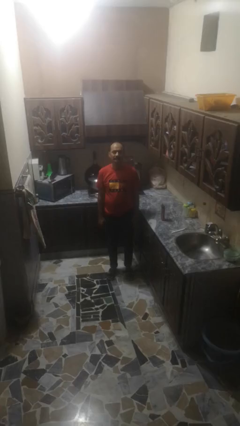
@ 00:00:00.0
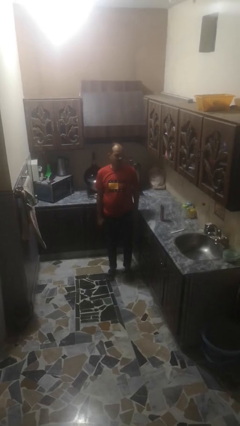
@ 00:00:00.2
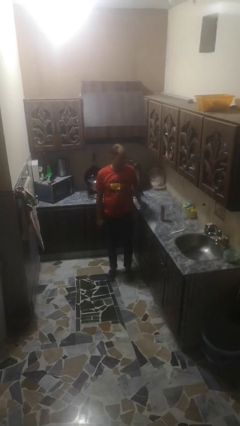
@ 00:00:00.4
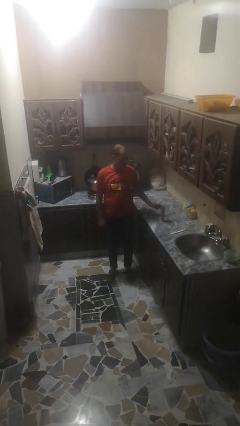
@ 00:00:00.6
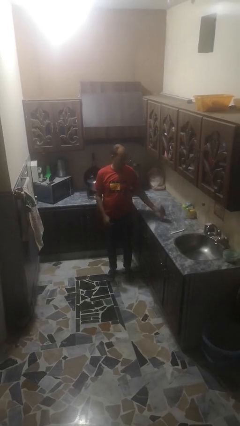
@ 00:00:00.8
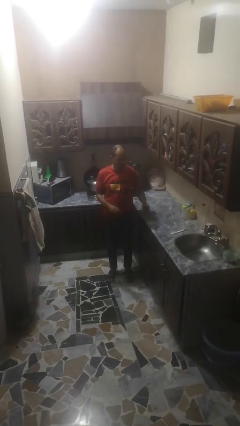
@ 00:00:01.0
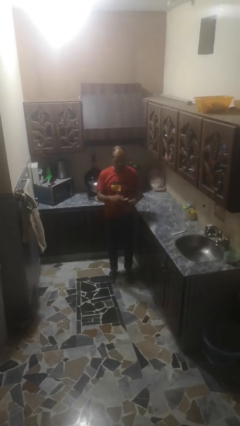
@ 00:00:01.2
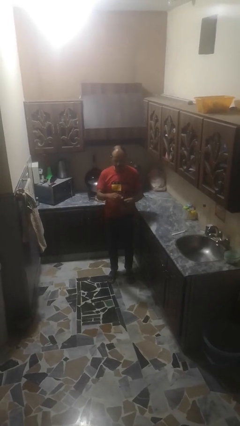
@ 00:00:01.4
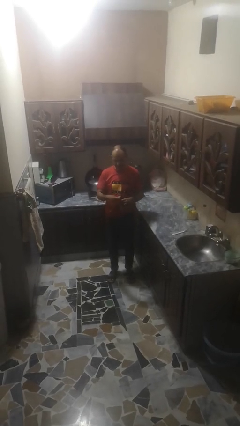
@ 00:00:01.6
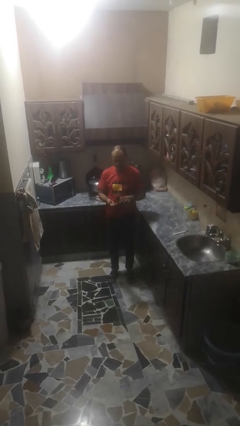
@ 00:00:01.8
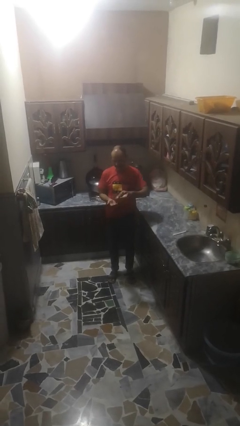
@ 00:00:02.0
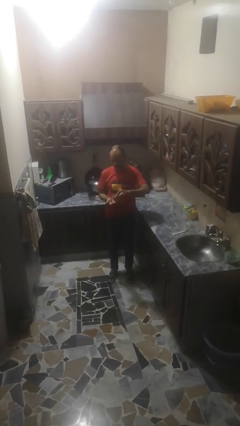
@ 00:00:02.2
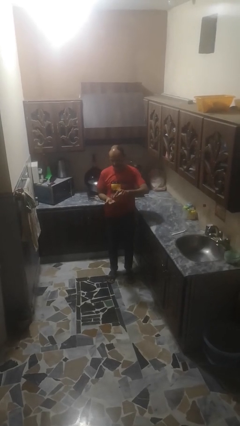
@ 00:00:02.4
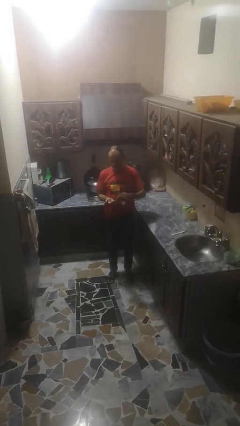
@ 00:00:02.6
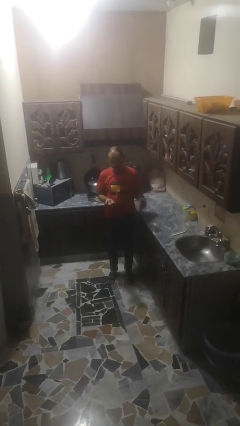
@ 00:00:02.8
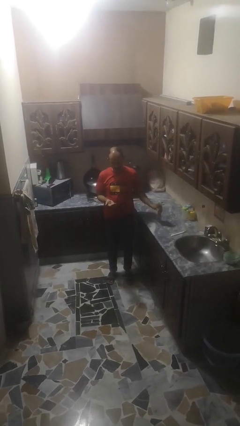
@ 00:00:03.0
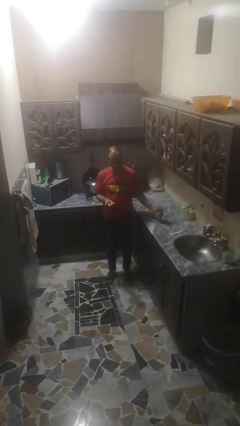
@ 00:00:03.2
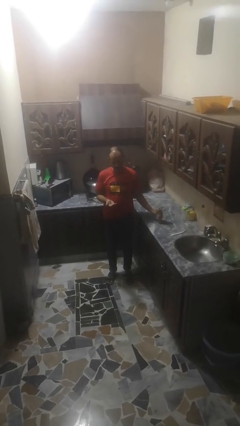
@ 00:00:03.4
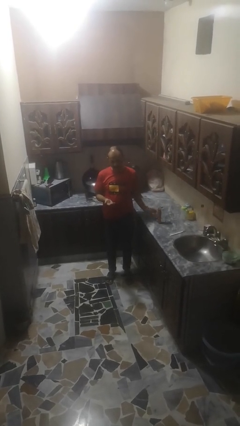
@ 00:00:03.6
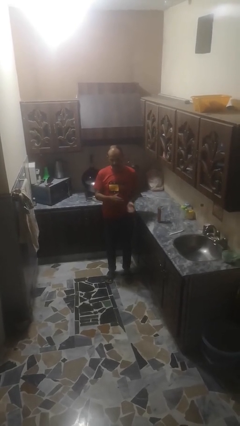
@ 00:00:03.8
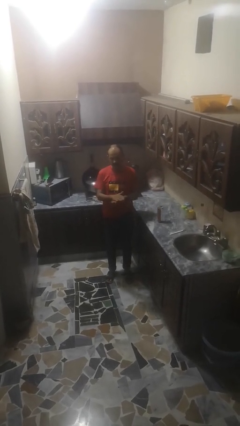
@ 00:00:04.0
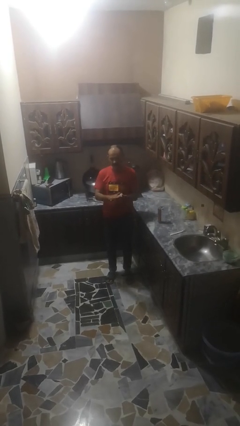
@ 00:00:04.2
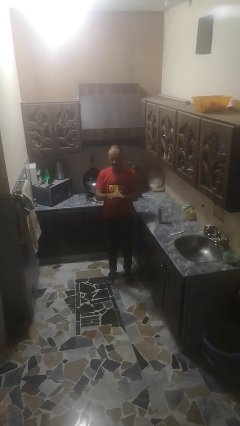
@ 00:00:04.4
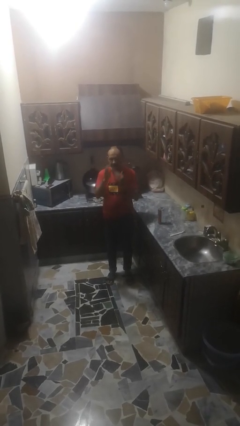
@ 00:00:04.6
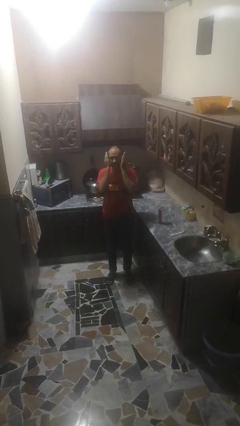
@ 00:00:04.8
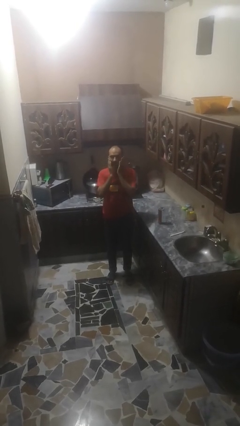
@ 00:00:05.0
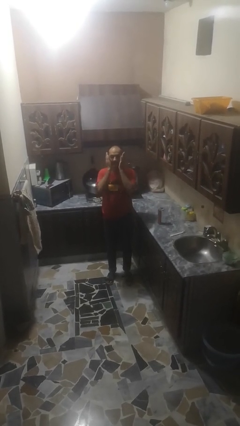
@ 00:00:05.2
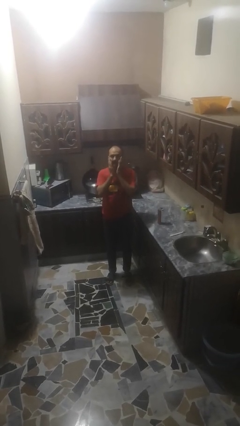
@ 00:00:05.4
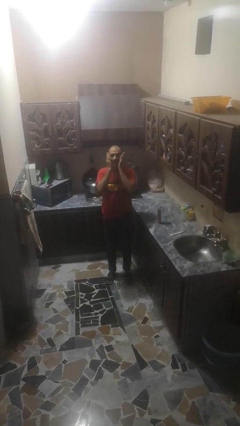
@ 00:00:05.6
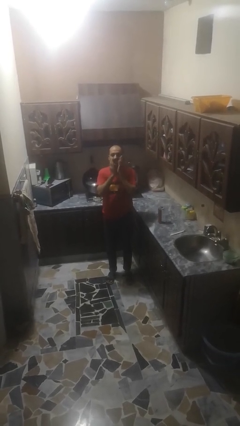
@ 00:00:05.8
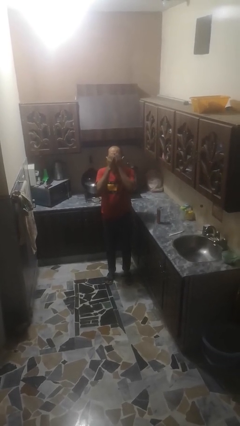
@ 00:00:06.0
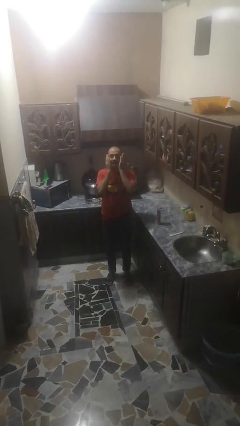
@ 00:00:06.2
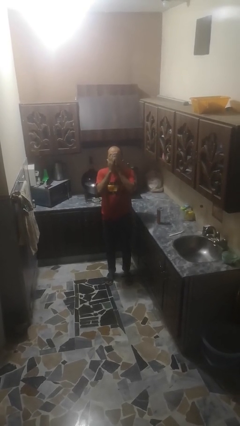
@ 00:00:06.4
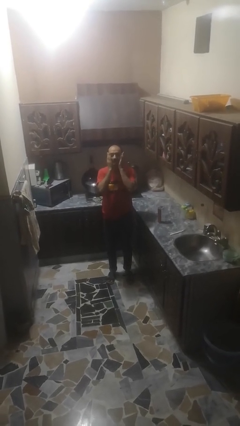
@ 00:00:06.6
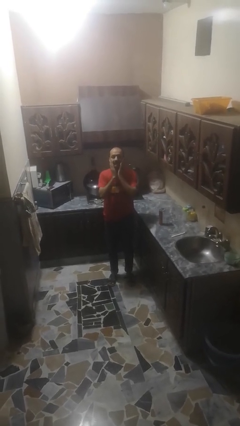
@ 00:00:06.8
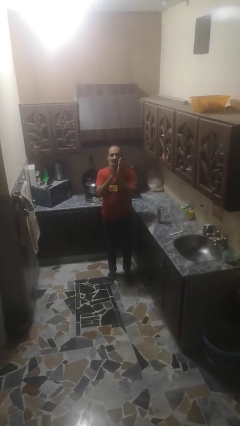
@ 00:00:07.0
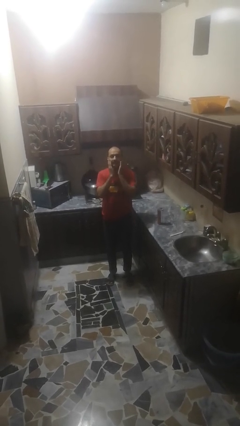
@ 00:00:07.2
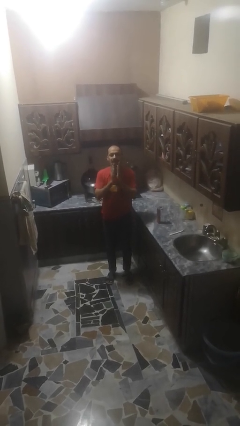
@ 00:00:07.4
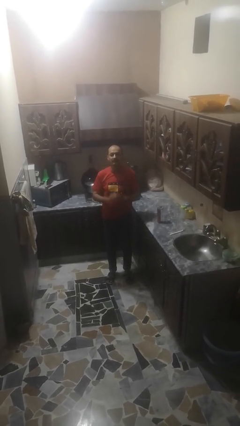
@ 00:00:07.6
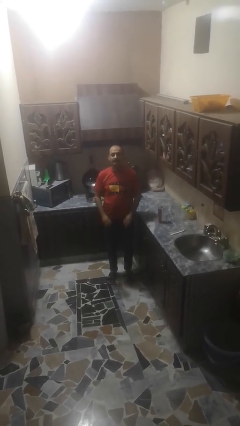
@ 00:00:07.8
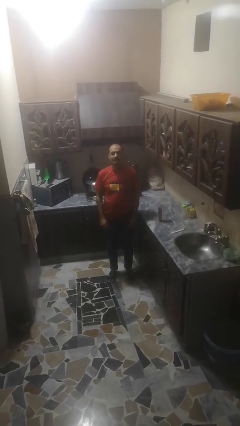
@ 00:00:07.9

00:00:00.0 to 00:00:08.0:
person applies sunscreen

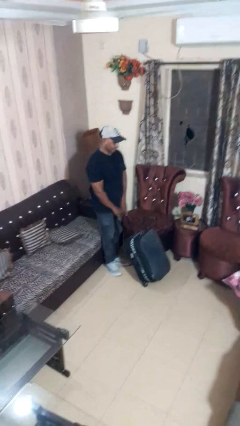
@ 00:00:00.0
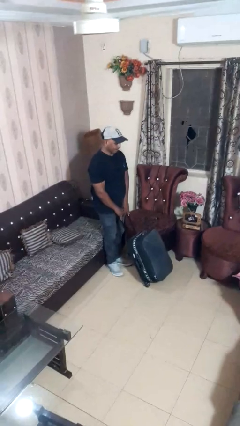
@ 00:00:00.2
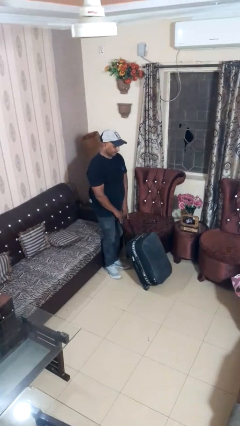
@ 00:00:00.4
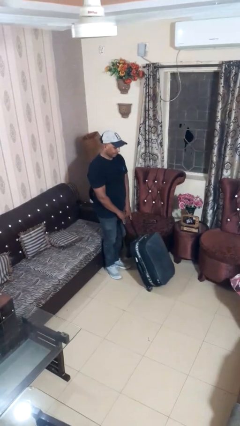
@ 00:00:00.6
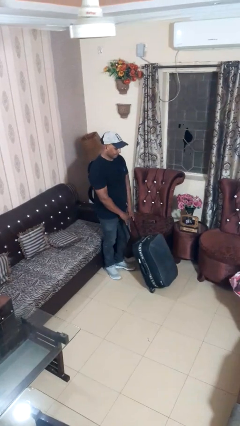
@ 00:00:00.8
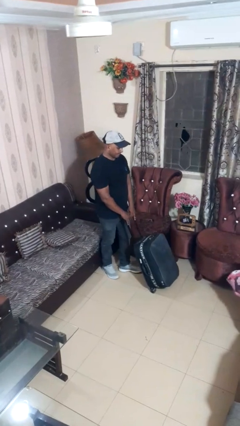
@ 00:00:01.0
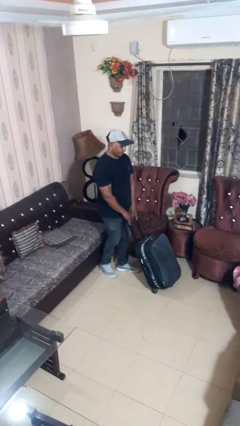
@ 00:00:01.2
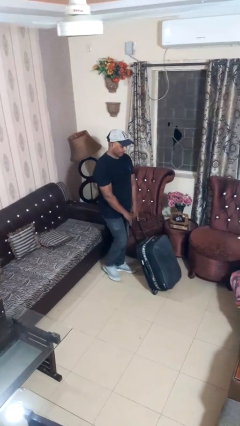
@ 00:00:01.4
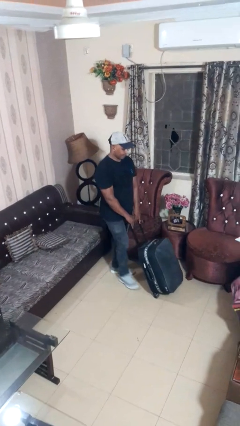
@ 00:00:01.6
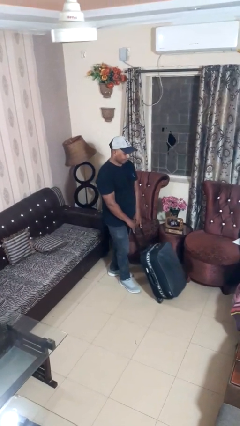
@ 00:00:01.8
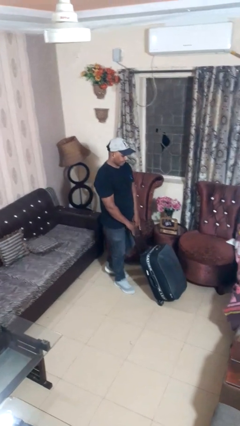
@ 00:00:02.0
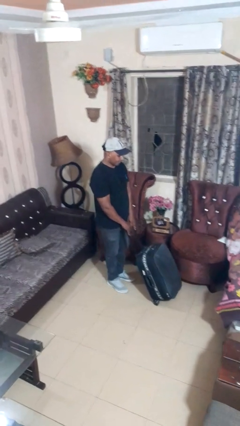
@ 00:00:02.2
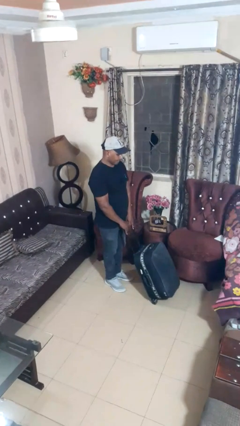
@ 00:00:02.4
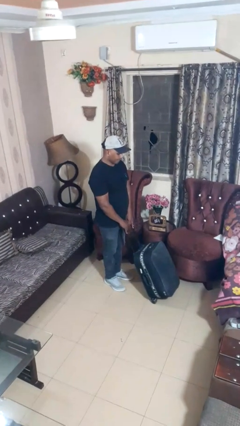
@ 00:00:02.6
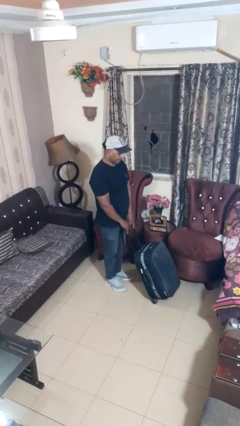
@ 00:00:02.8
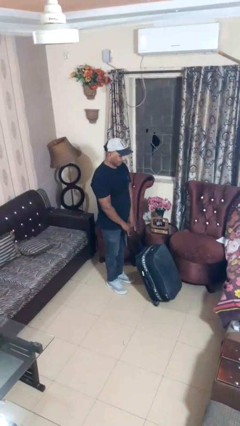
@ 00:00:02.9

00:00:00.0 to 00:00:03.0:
person pushes wheeled cart

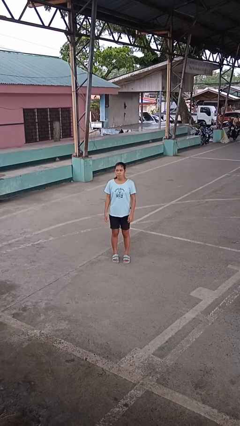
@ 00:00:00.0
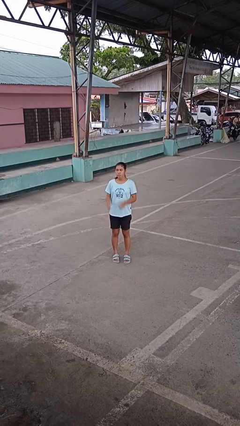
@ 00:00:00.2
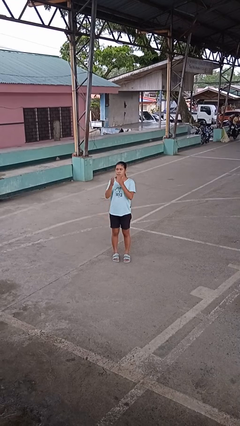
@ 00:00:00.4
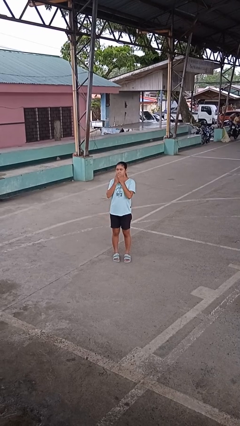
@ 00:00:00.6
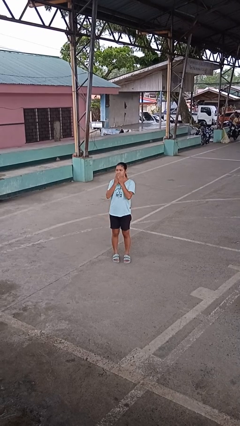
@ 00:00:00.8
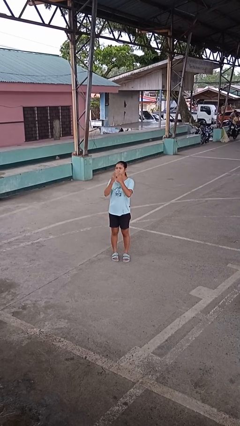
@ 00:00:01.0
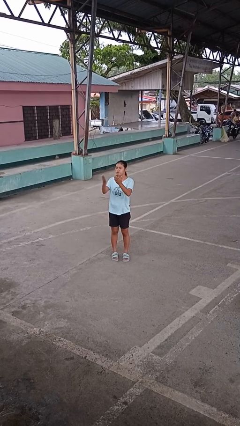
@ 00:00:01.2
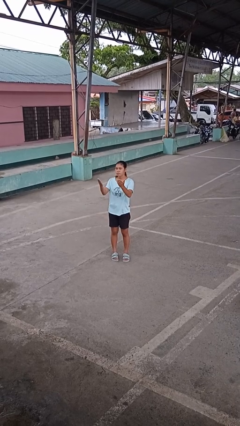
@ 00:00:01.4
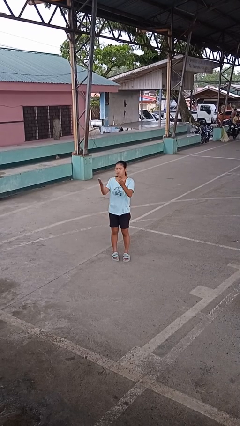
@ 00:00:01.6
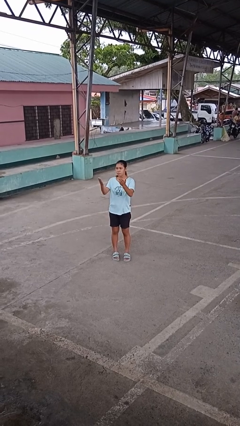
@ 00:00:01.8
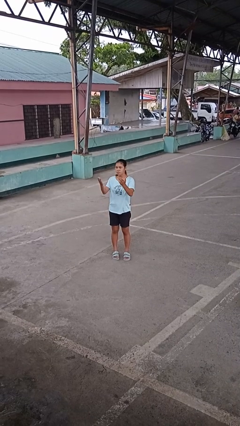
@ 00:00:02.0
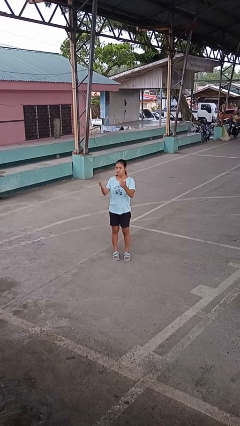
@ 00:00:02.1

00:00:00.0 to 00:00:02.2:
person gestures blow kiss

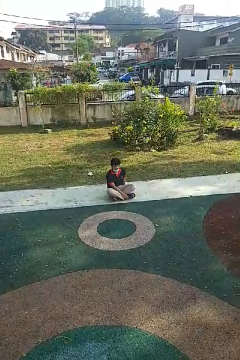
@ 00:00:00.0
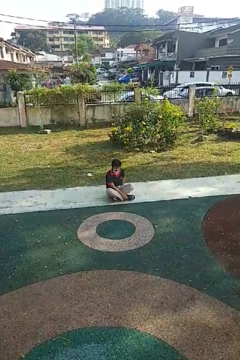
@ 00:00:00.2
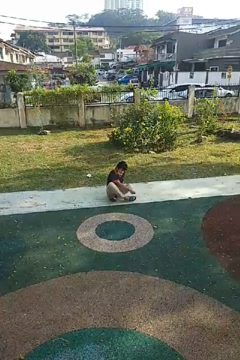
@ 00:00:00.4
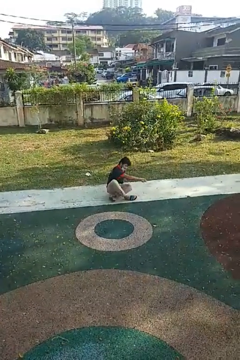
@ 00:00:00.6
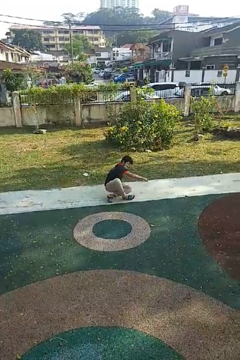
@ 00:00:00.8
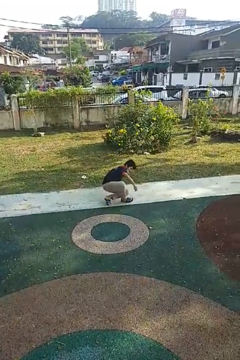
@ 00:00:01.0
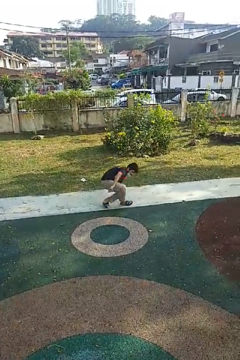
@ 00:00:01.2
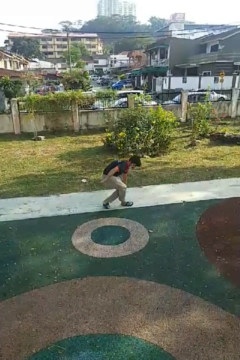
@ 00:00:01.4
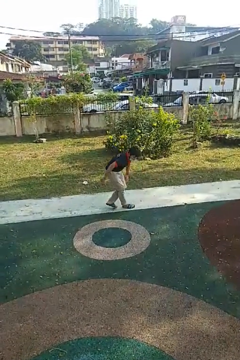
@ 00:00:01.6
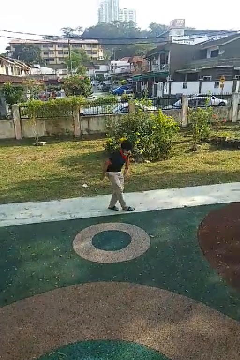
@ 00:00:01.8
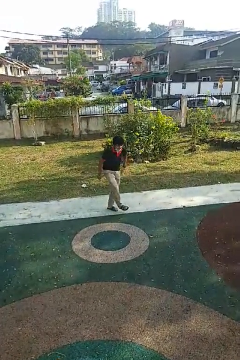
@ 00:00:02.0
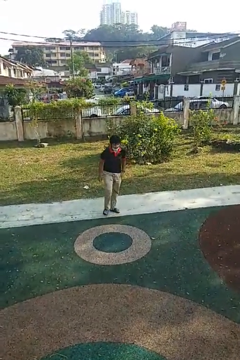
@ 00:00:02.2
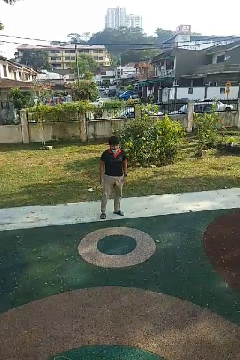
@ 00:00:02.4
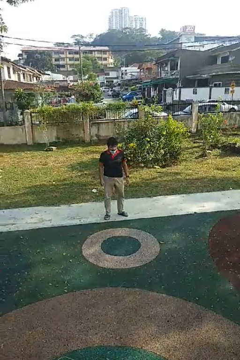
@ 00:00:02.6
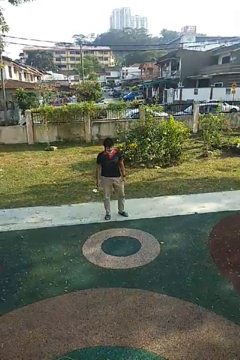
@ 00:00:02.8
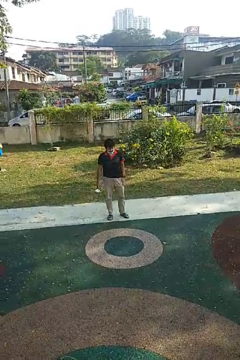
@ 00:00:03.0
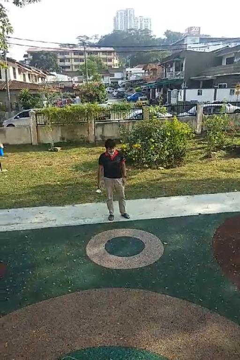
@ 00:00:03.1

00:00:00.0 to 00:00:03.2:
person stands up from floor

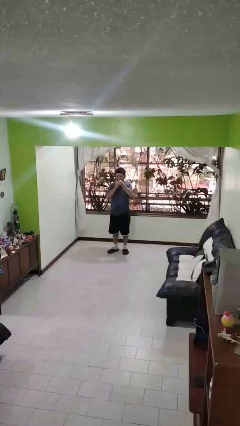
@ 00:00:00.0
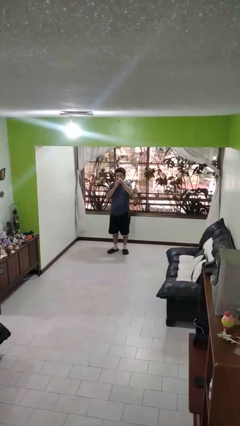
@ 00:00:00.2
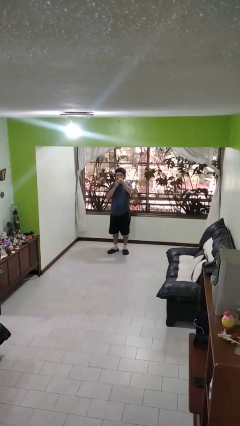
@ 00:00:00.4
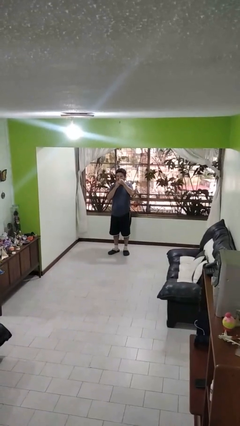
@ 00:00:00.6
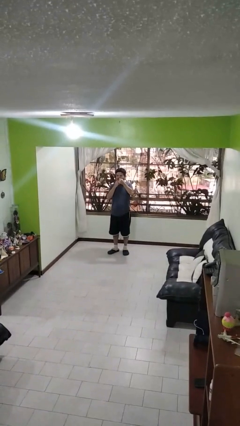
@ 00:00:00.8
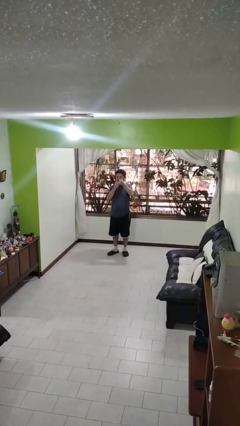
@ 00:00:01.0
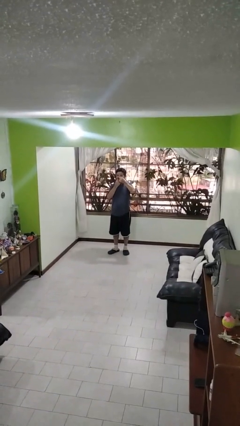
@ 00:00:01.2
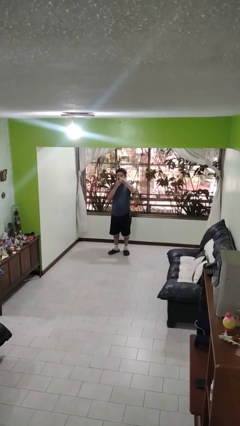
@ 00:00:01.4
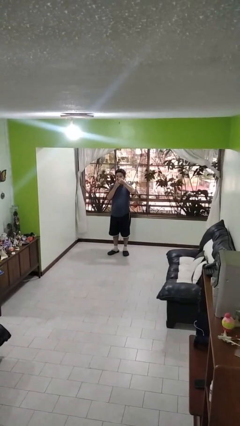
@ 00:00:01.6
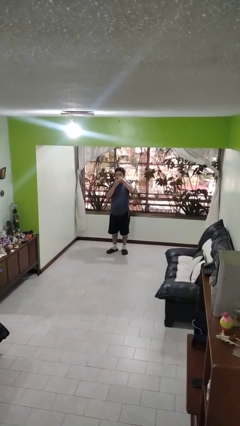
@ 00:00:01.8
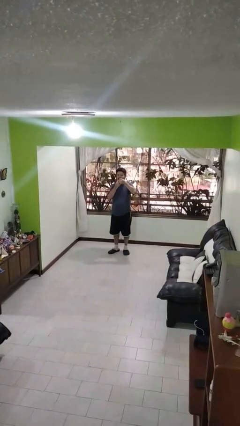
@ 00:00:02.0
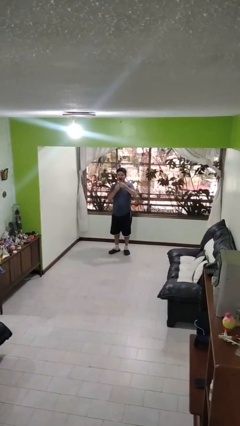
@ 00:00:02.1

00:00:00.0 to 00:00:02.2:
person flosses
